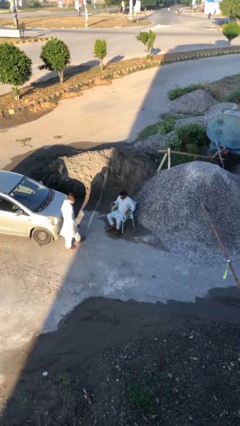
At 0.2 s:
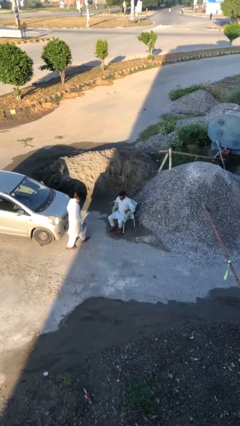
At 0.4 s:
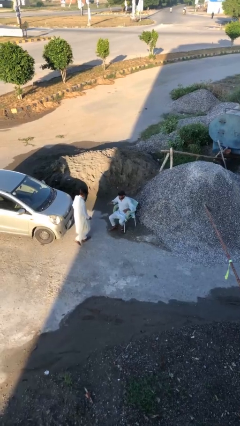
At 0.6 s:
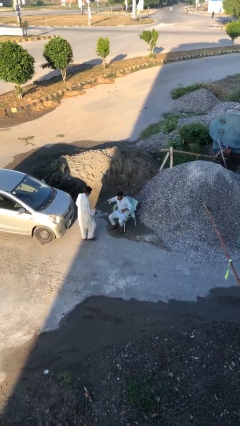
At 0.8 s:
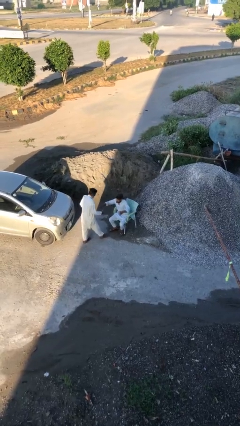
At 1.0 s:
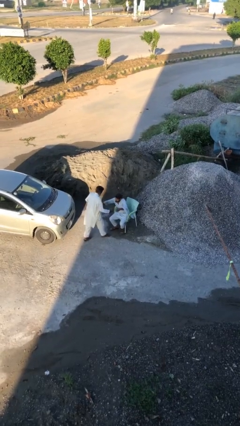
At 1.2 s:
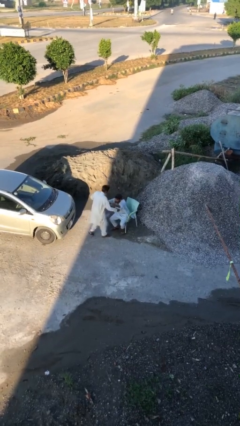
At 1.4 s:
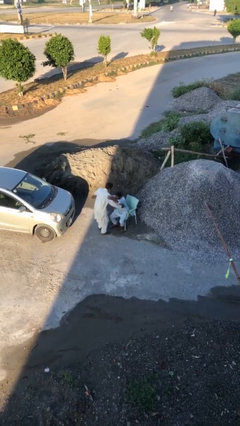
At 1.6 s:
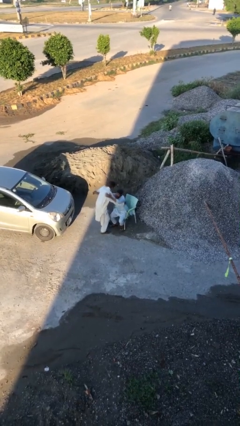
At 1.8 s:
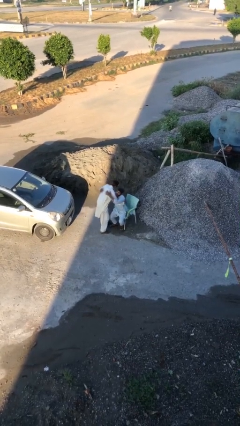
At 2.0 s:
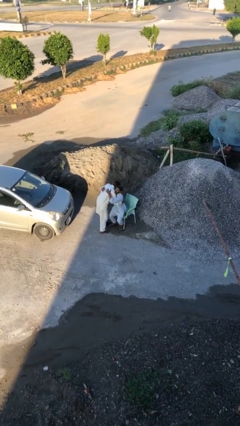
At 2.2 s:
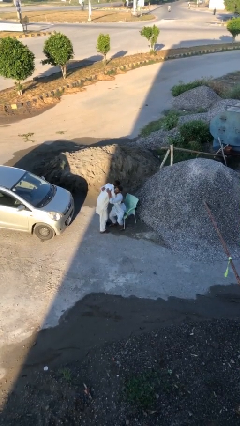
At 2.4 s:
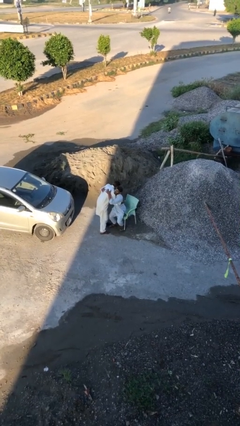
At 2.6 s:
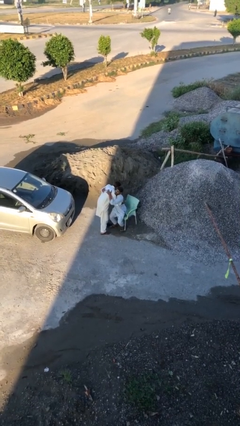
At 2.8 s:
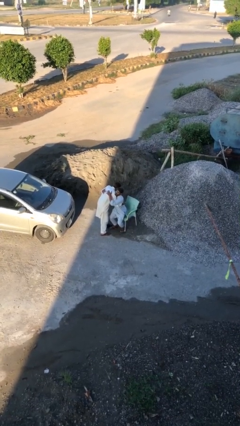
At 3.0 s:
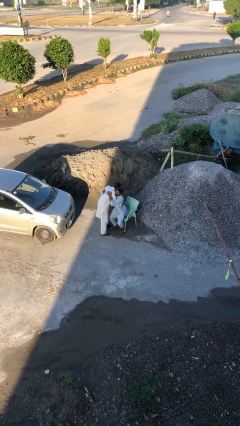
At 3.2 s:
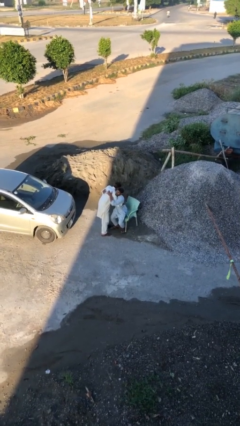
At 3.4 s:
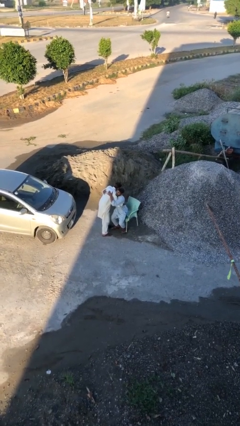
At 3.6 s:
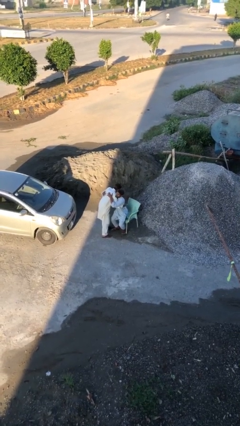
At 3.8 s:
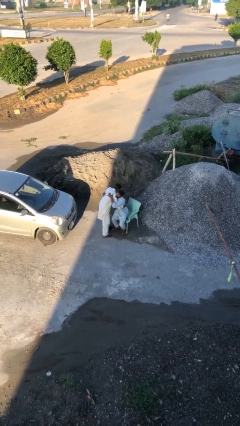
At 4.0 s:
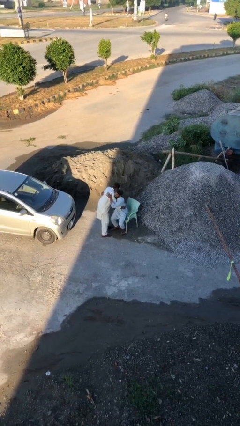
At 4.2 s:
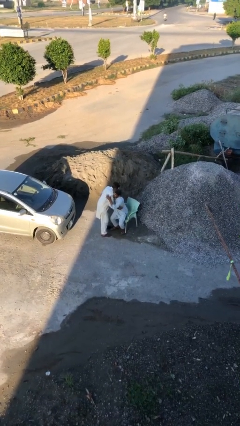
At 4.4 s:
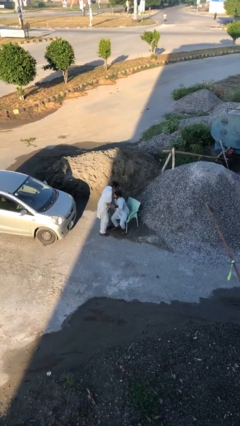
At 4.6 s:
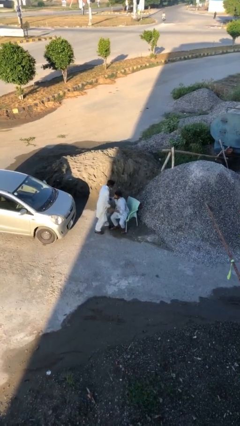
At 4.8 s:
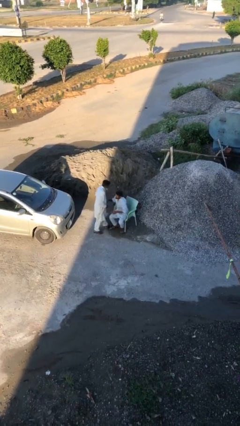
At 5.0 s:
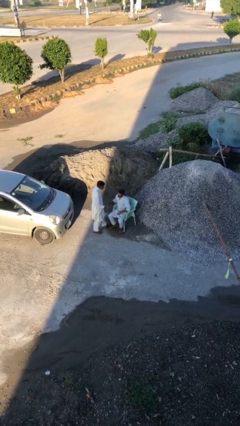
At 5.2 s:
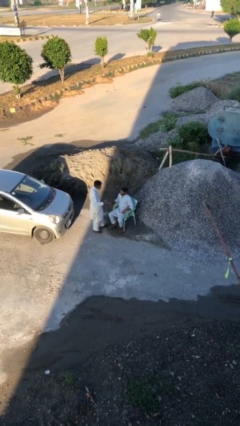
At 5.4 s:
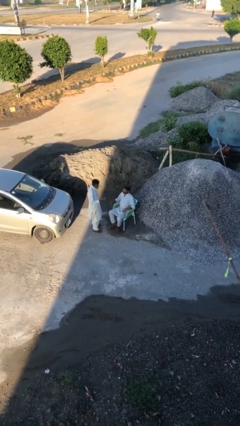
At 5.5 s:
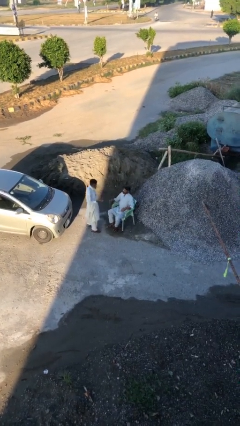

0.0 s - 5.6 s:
person embraces person

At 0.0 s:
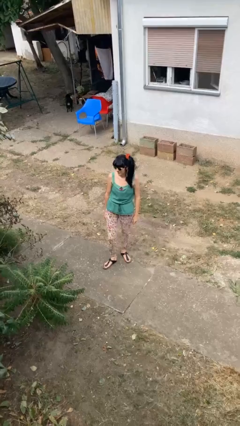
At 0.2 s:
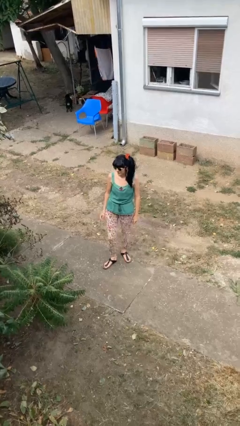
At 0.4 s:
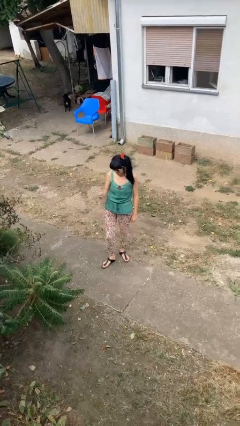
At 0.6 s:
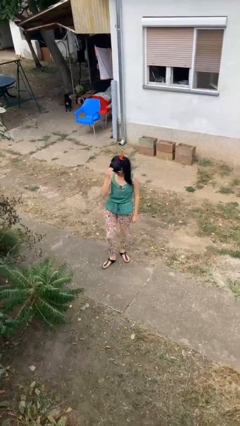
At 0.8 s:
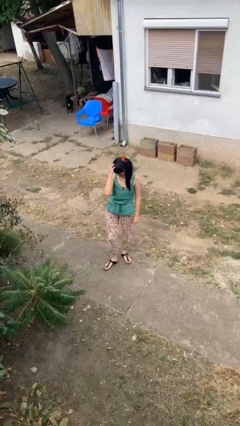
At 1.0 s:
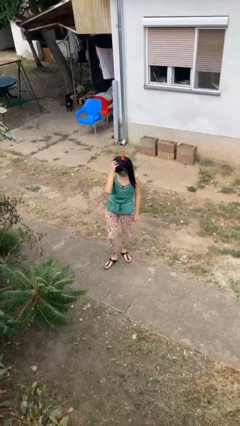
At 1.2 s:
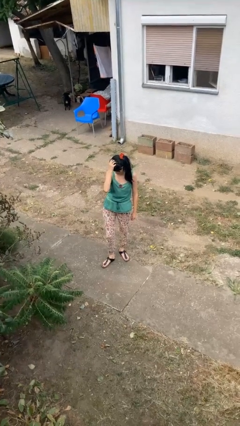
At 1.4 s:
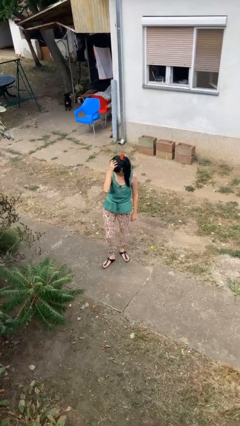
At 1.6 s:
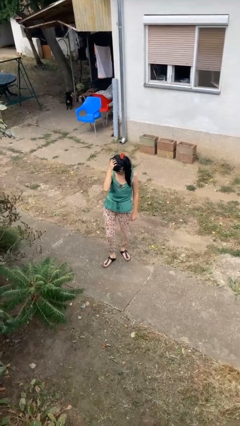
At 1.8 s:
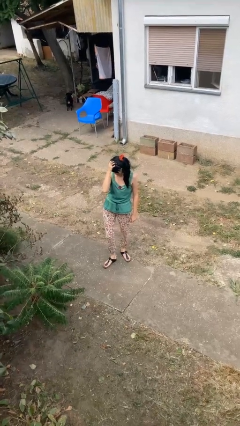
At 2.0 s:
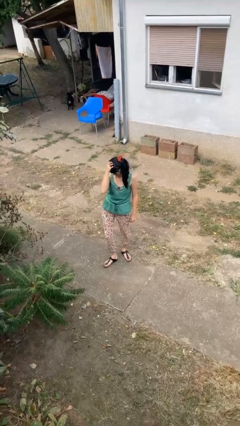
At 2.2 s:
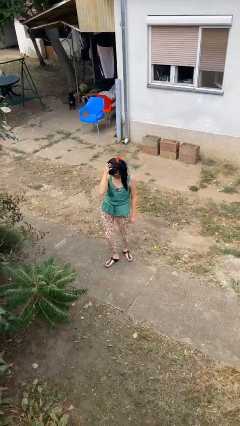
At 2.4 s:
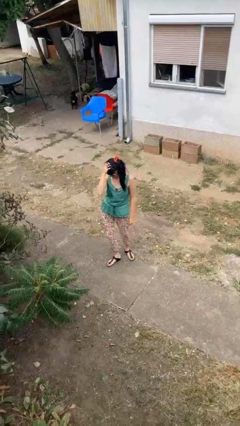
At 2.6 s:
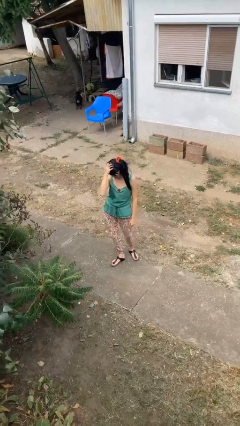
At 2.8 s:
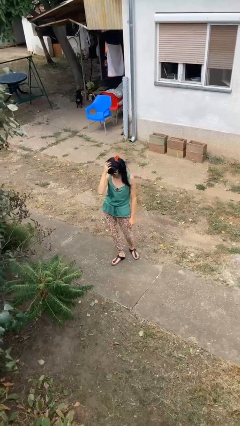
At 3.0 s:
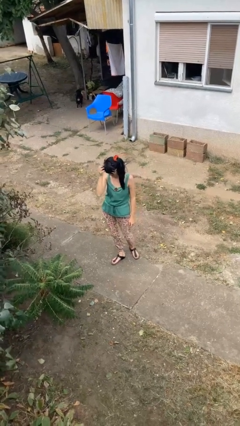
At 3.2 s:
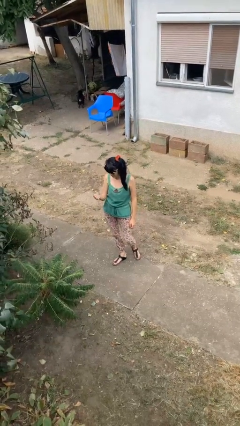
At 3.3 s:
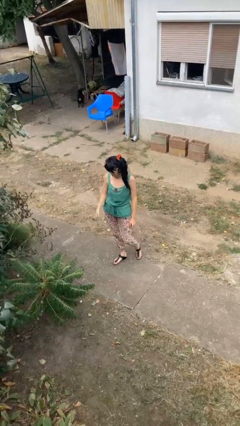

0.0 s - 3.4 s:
person scratches face

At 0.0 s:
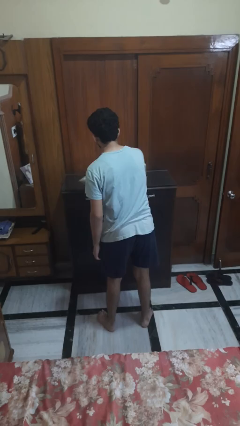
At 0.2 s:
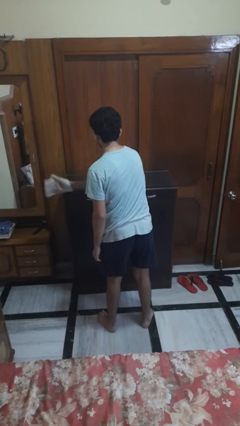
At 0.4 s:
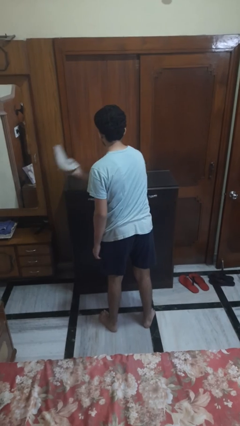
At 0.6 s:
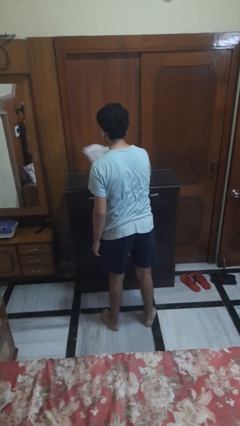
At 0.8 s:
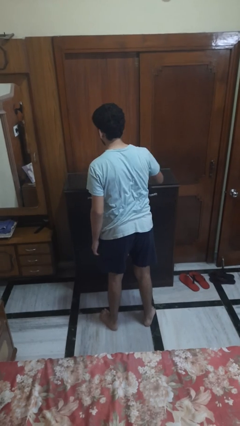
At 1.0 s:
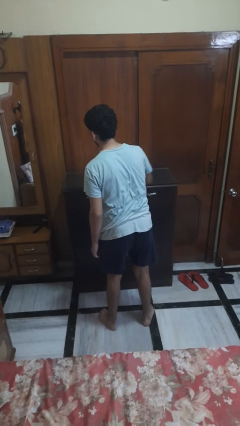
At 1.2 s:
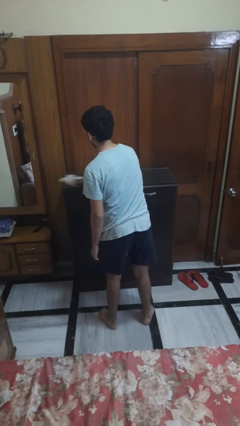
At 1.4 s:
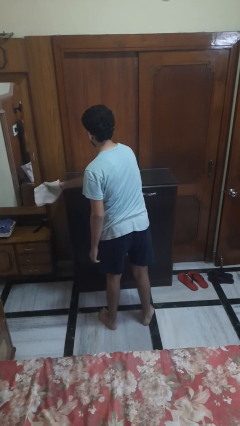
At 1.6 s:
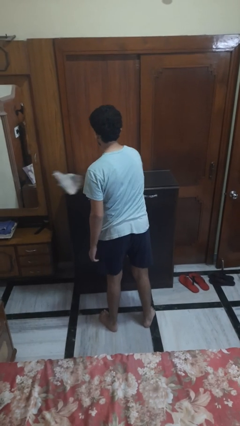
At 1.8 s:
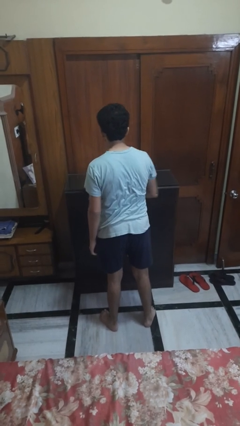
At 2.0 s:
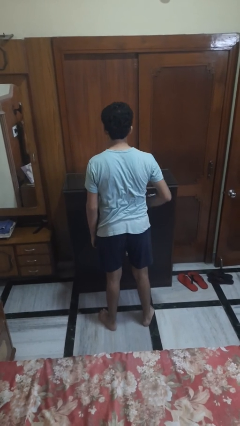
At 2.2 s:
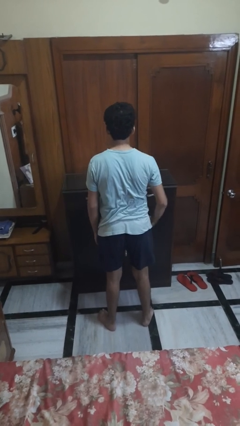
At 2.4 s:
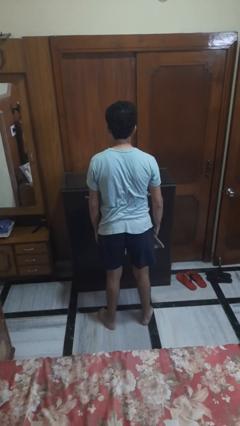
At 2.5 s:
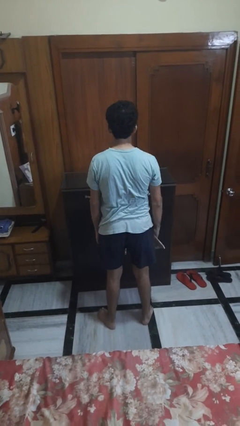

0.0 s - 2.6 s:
person cleans table with rag

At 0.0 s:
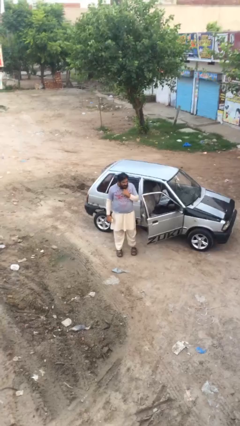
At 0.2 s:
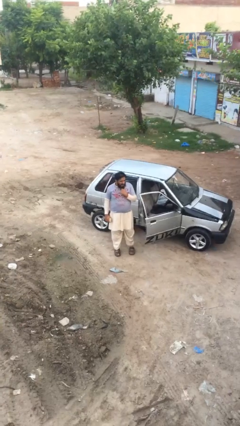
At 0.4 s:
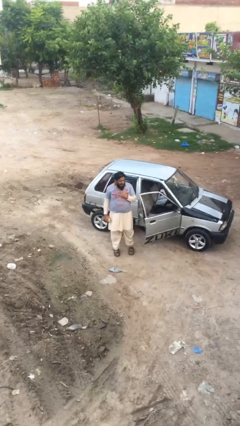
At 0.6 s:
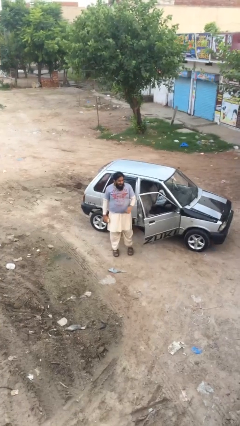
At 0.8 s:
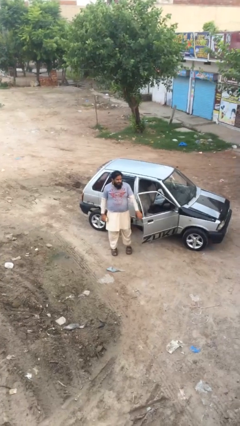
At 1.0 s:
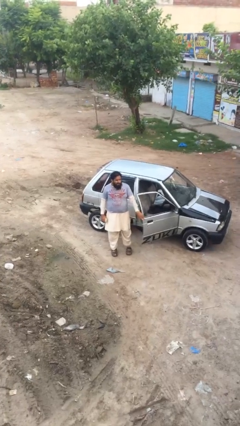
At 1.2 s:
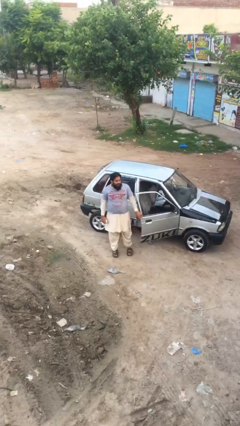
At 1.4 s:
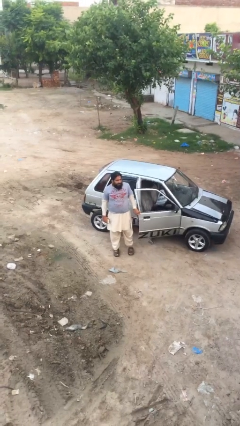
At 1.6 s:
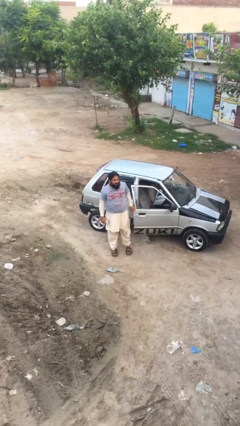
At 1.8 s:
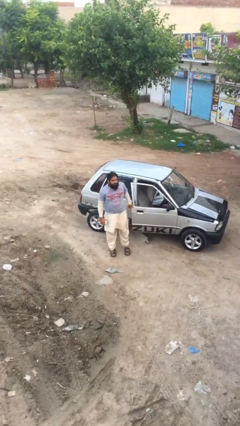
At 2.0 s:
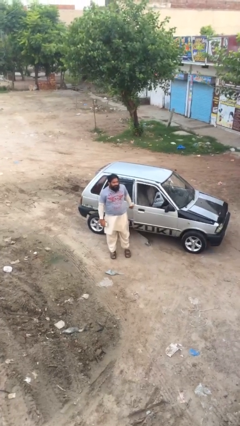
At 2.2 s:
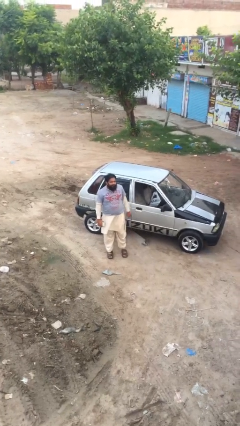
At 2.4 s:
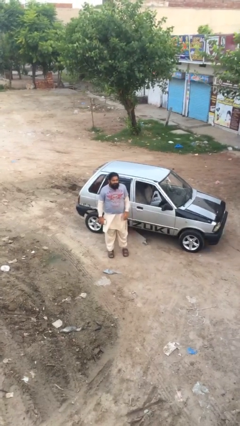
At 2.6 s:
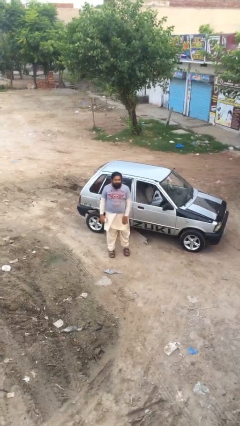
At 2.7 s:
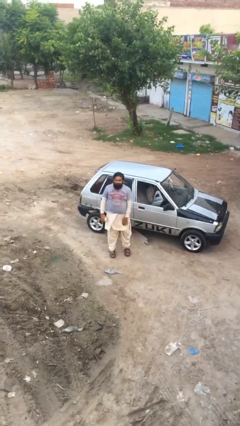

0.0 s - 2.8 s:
person closes car door

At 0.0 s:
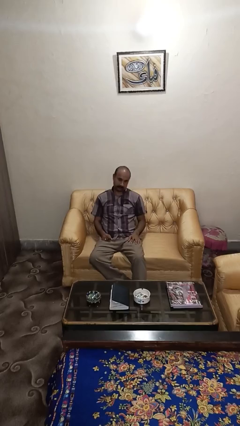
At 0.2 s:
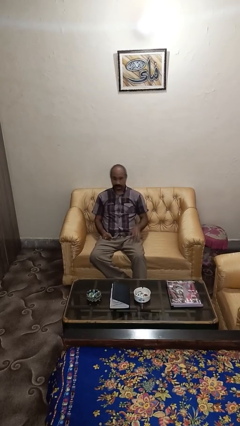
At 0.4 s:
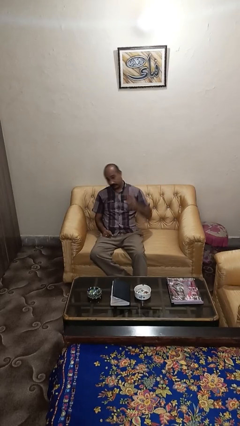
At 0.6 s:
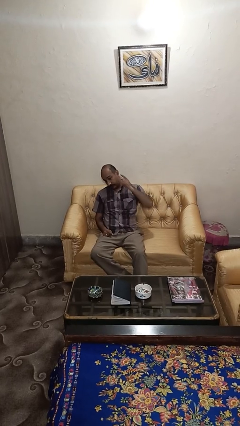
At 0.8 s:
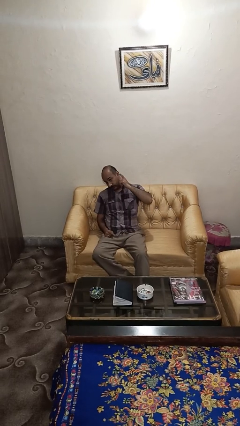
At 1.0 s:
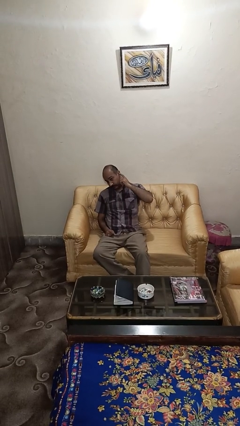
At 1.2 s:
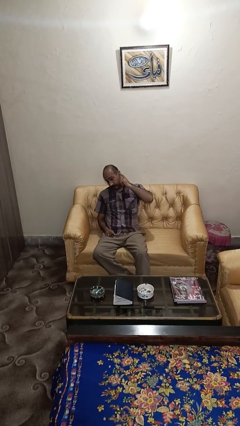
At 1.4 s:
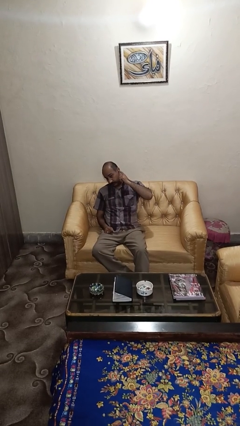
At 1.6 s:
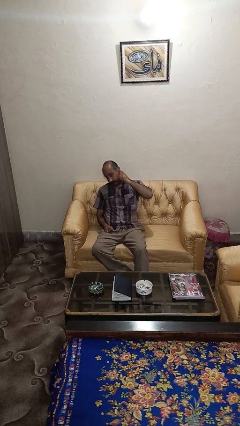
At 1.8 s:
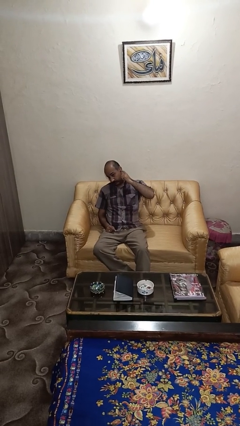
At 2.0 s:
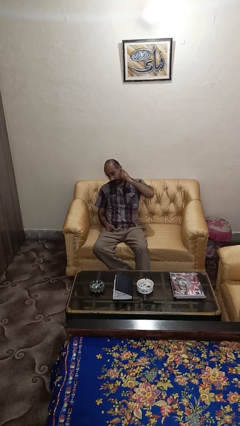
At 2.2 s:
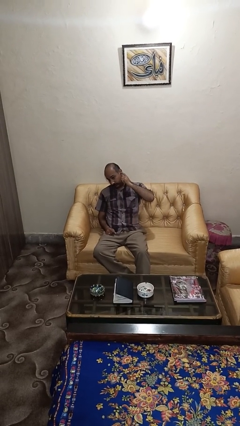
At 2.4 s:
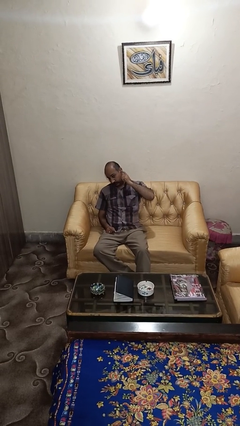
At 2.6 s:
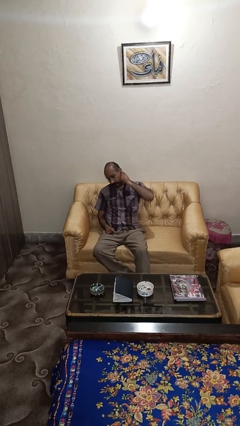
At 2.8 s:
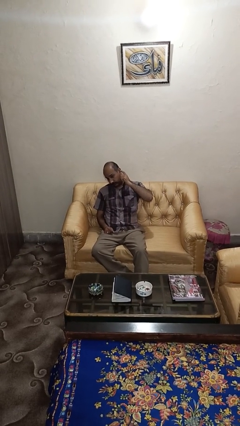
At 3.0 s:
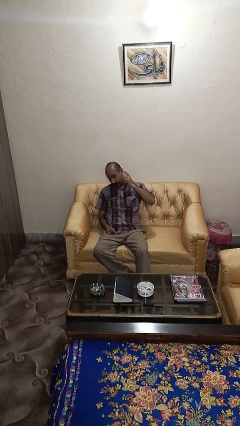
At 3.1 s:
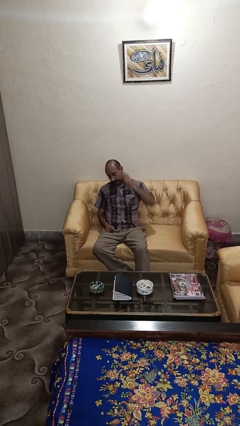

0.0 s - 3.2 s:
person gestures listen closely
